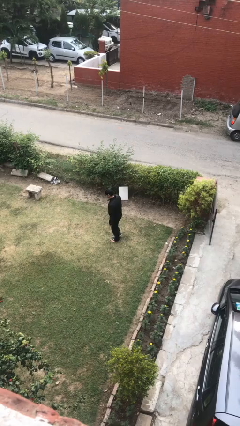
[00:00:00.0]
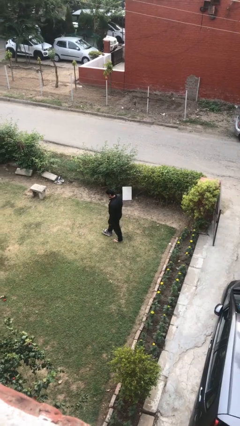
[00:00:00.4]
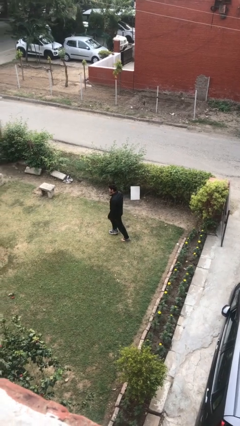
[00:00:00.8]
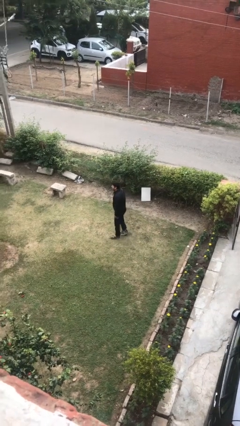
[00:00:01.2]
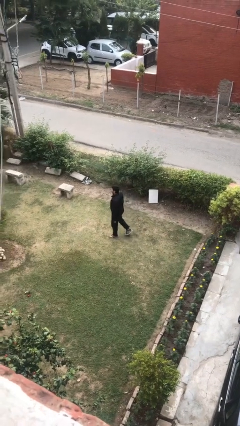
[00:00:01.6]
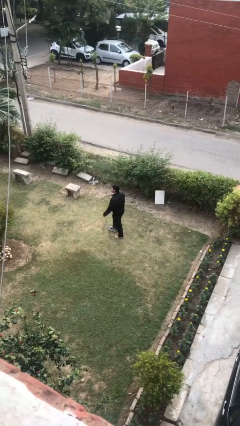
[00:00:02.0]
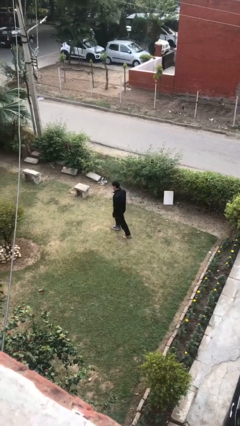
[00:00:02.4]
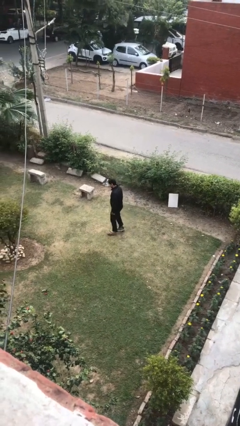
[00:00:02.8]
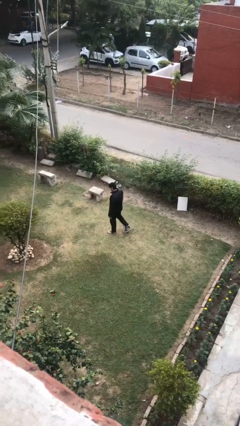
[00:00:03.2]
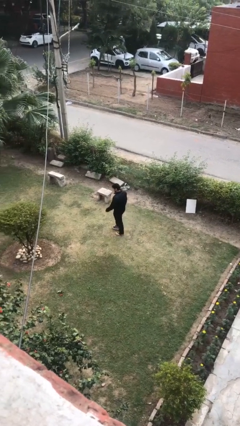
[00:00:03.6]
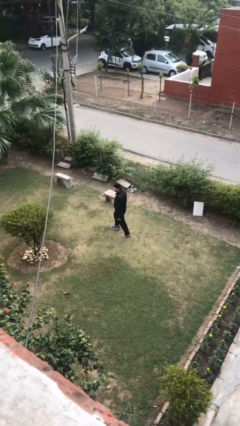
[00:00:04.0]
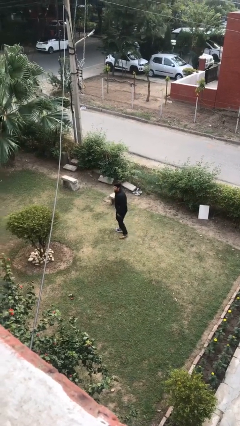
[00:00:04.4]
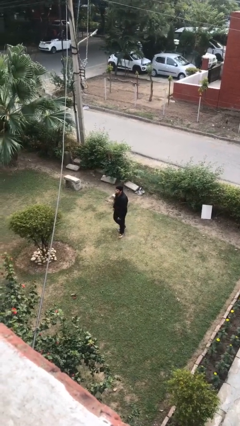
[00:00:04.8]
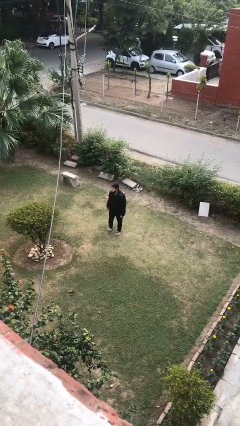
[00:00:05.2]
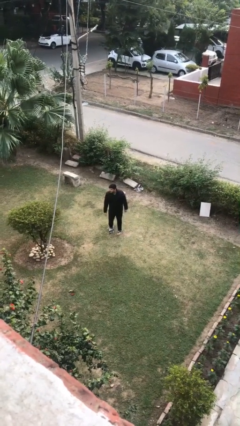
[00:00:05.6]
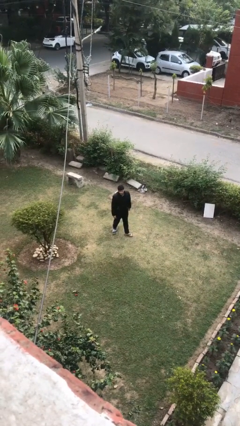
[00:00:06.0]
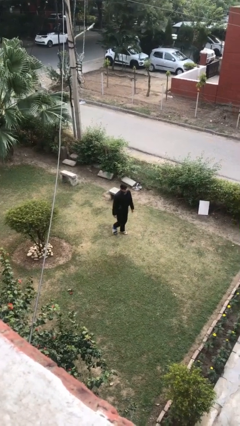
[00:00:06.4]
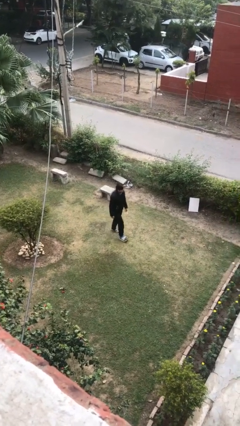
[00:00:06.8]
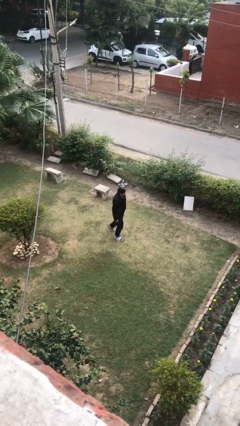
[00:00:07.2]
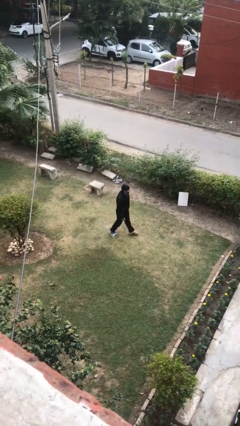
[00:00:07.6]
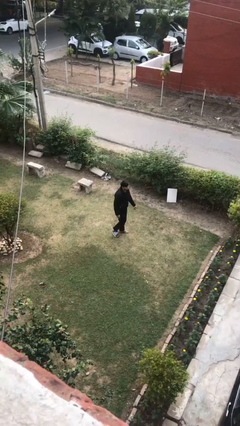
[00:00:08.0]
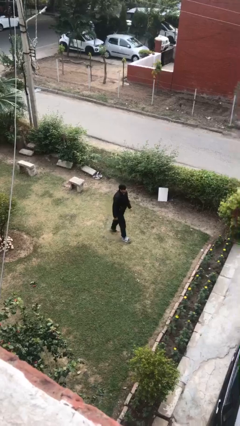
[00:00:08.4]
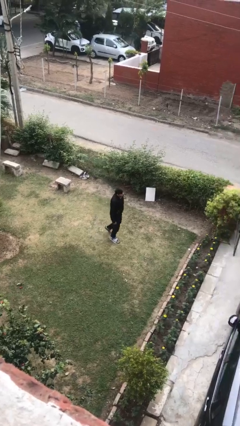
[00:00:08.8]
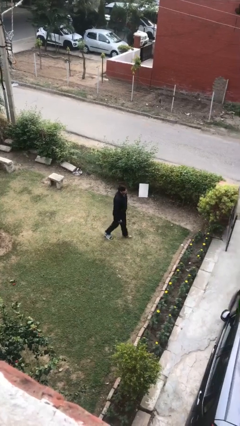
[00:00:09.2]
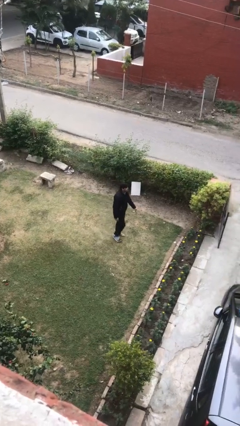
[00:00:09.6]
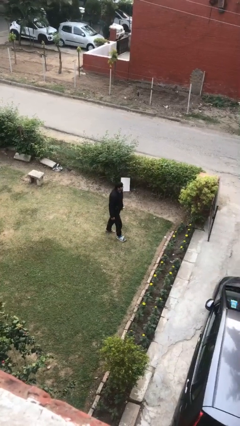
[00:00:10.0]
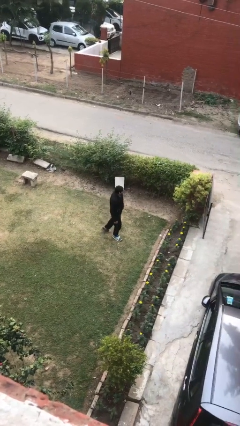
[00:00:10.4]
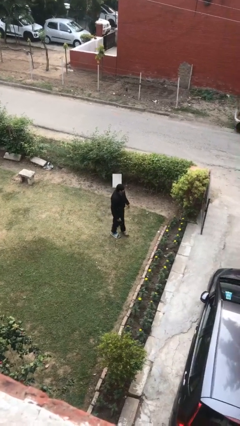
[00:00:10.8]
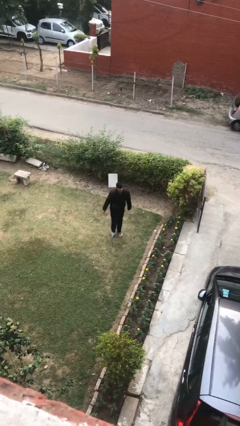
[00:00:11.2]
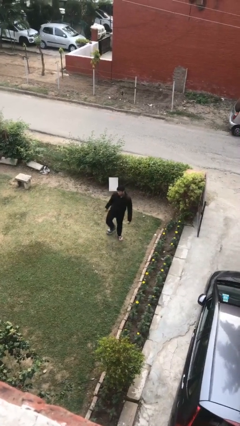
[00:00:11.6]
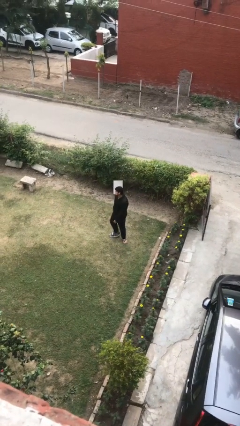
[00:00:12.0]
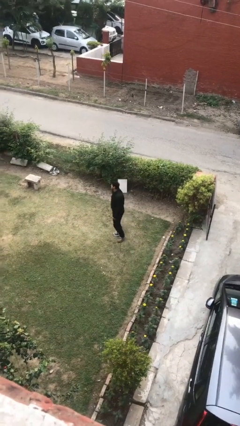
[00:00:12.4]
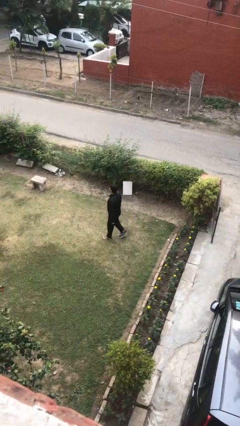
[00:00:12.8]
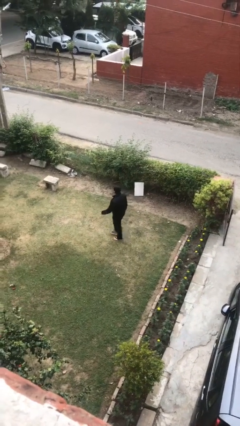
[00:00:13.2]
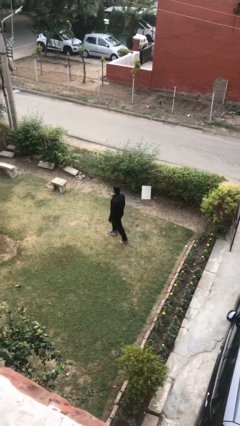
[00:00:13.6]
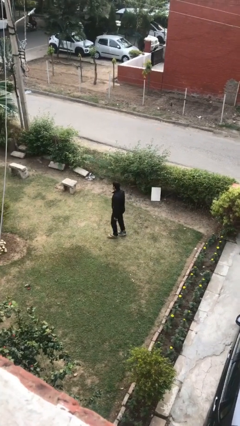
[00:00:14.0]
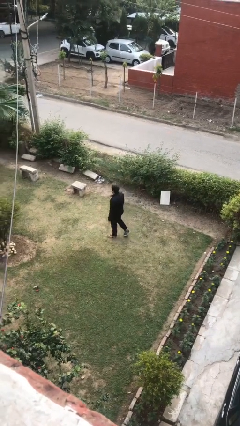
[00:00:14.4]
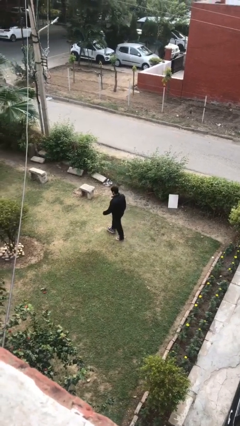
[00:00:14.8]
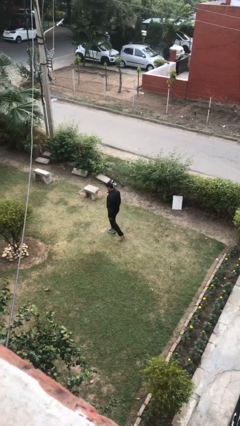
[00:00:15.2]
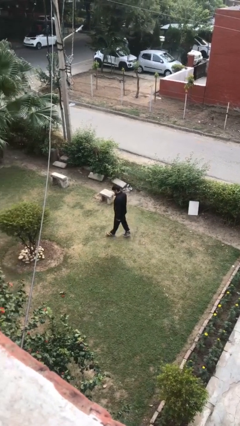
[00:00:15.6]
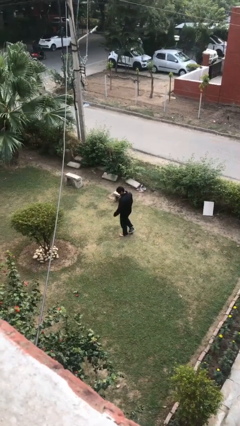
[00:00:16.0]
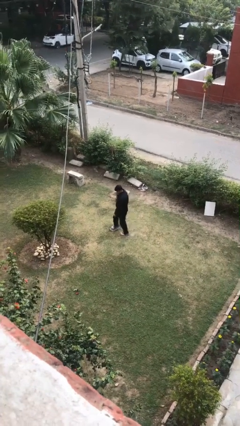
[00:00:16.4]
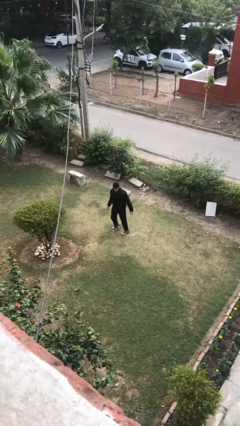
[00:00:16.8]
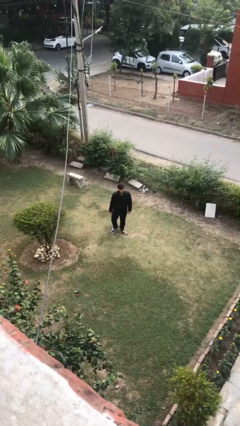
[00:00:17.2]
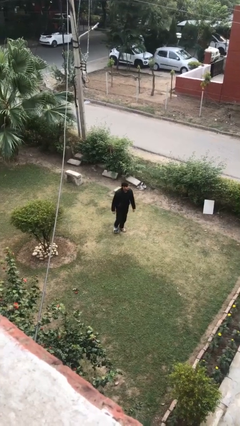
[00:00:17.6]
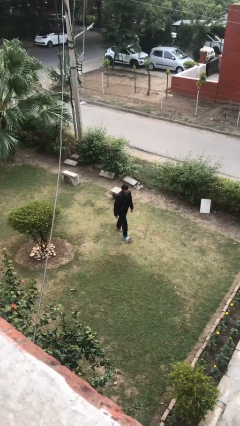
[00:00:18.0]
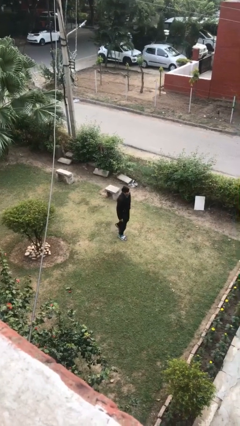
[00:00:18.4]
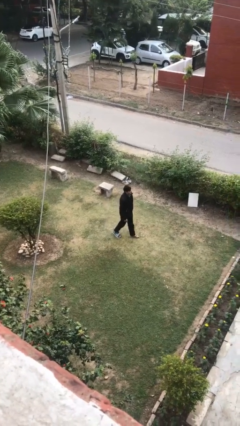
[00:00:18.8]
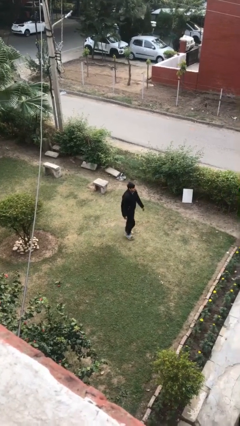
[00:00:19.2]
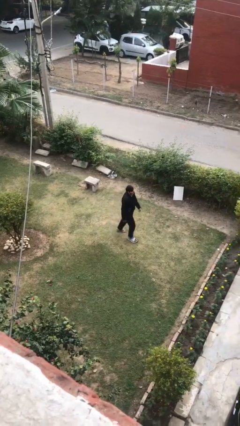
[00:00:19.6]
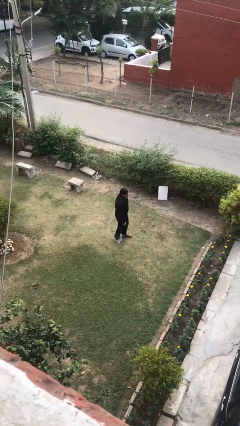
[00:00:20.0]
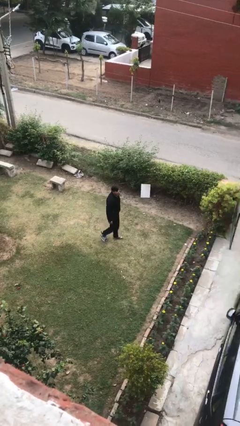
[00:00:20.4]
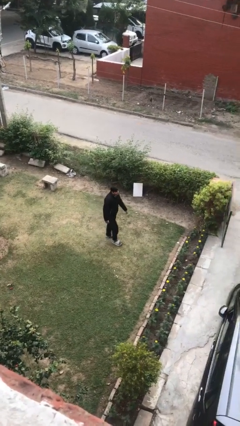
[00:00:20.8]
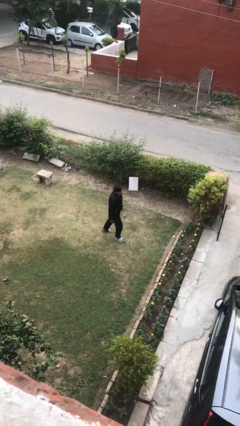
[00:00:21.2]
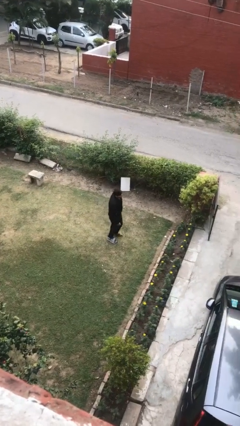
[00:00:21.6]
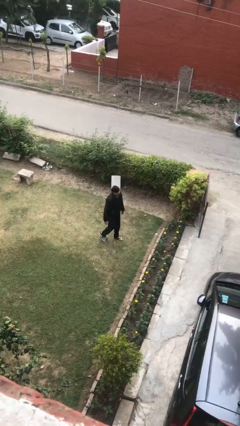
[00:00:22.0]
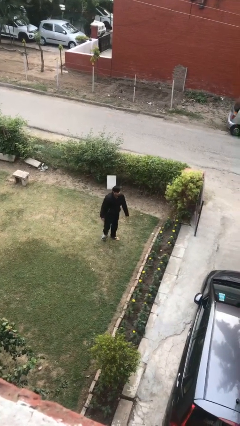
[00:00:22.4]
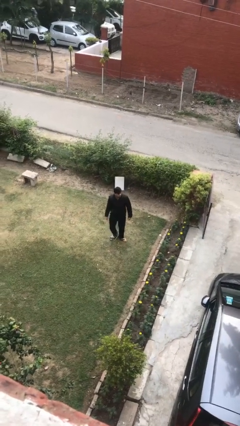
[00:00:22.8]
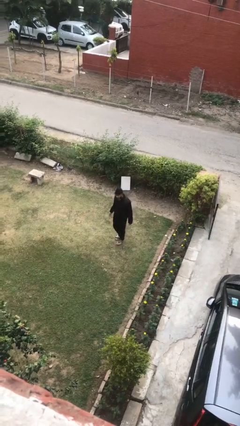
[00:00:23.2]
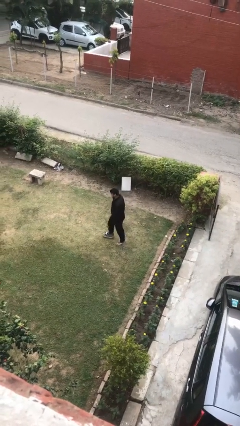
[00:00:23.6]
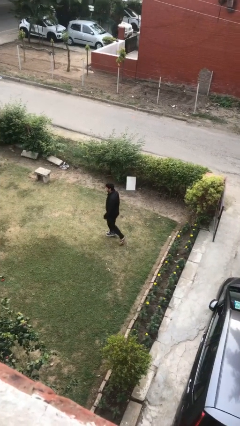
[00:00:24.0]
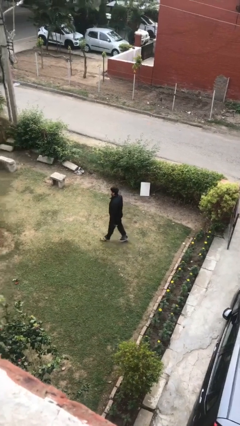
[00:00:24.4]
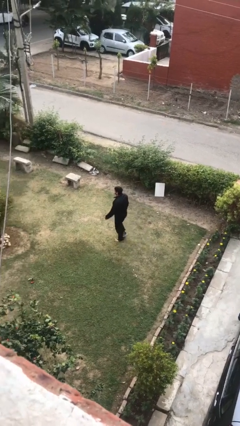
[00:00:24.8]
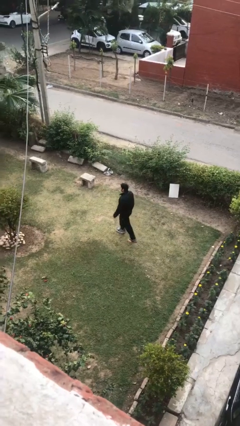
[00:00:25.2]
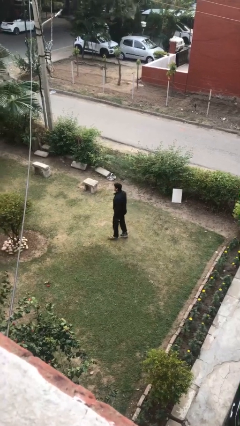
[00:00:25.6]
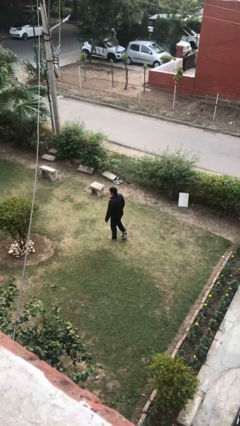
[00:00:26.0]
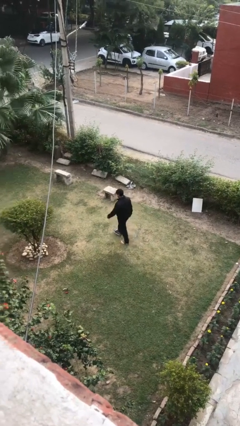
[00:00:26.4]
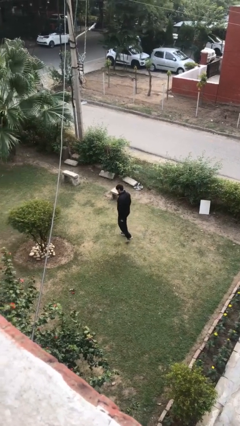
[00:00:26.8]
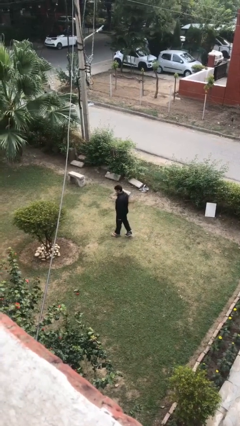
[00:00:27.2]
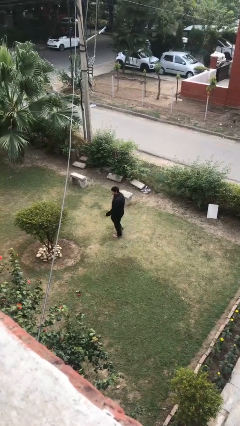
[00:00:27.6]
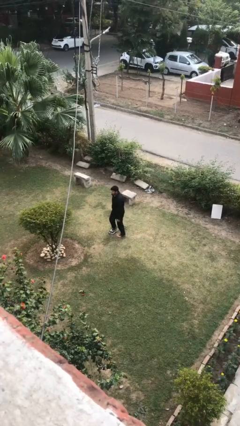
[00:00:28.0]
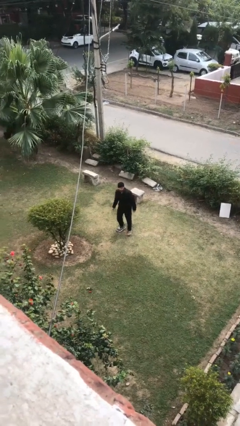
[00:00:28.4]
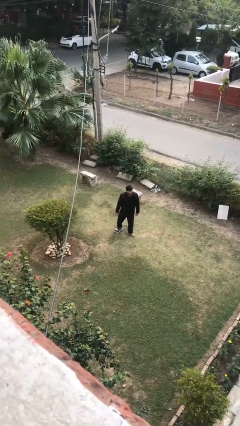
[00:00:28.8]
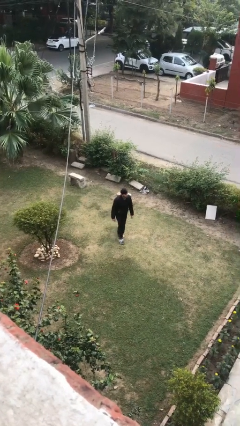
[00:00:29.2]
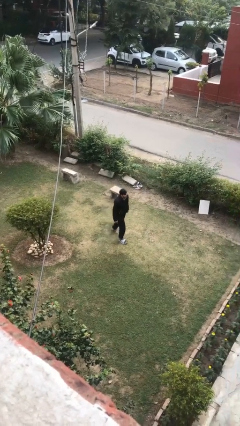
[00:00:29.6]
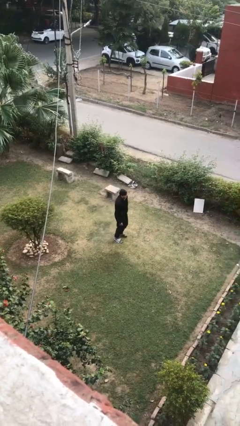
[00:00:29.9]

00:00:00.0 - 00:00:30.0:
person walks

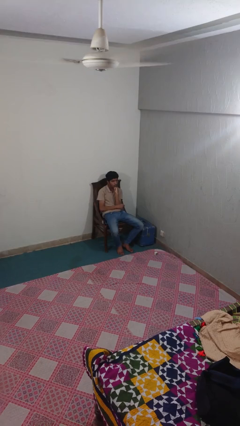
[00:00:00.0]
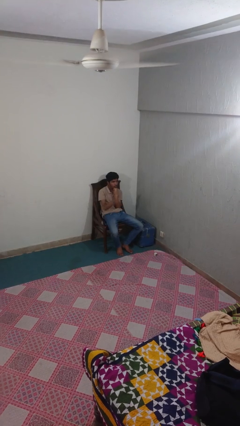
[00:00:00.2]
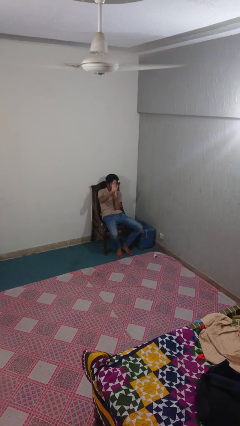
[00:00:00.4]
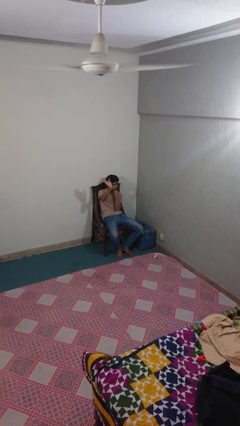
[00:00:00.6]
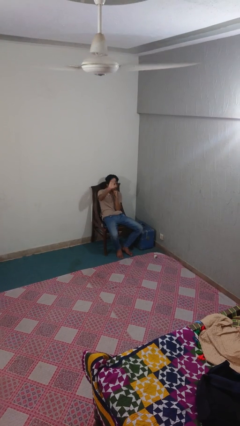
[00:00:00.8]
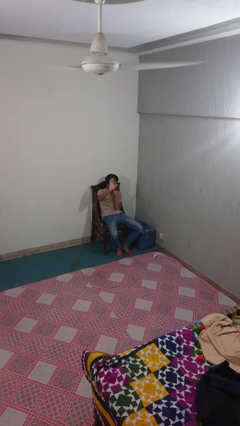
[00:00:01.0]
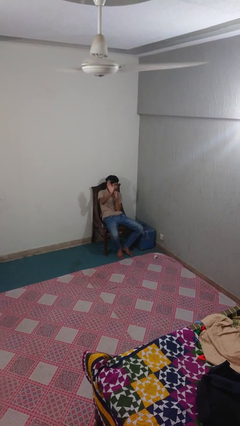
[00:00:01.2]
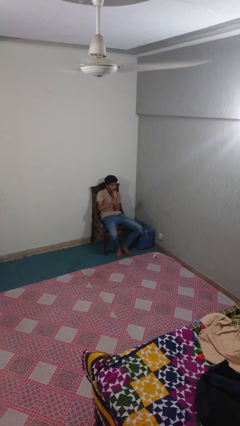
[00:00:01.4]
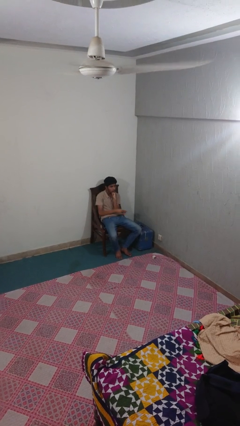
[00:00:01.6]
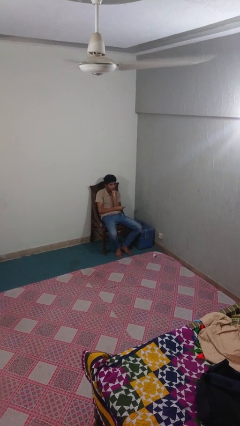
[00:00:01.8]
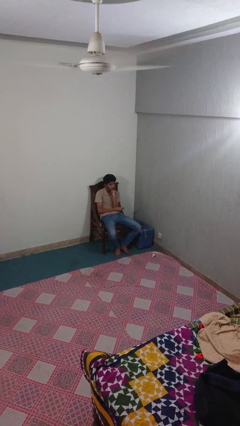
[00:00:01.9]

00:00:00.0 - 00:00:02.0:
person waves at person

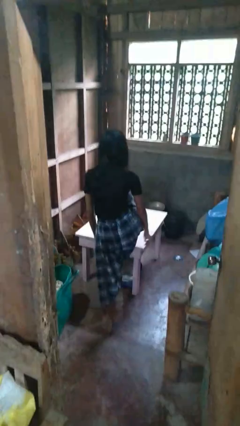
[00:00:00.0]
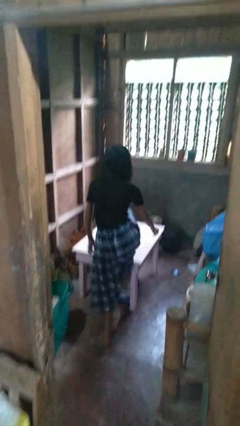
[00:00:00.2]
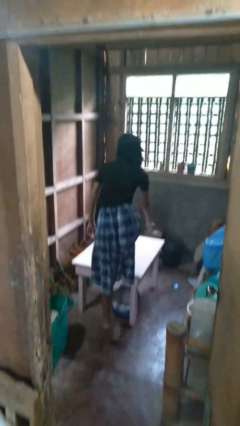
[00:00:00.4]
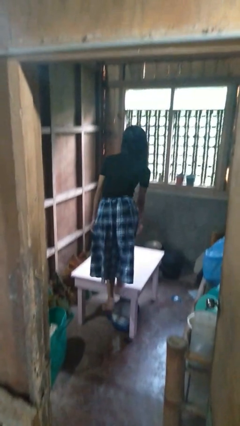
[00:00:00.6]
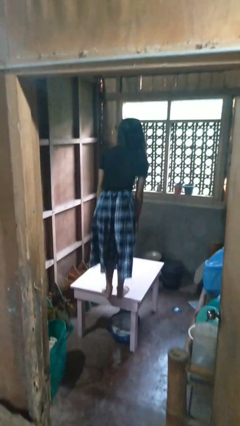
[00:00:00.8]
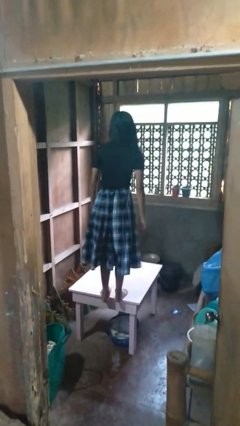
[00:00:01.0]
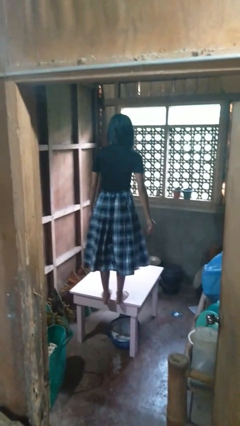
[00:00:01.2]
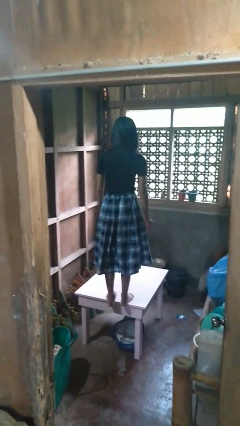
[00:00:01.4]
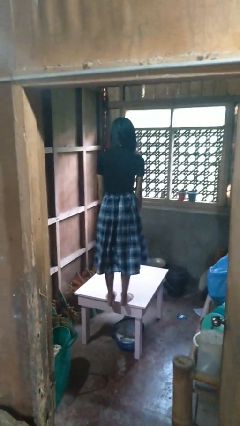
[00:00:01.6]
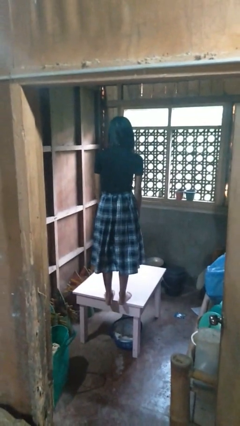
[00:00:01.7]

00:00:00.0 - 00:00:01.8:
person climbs on table
